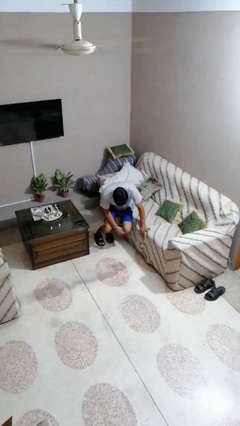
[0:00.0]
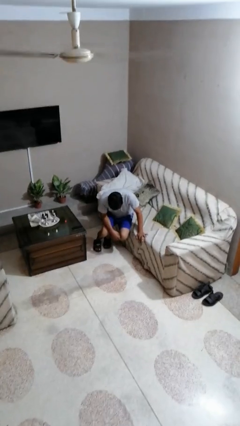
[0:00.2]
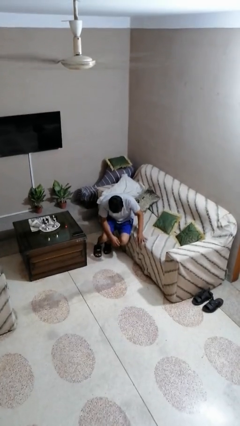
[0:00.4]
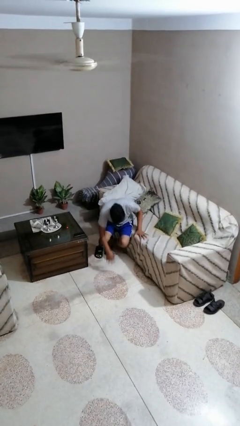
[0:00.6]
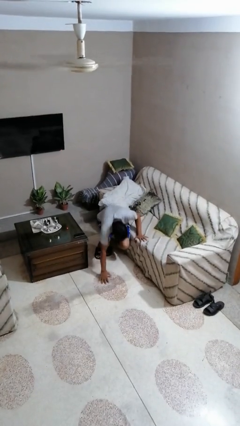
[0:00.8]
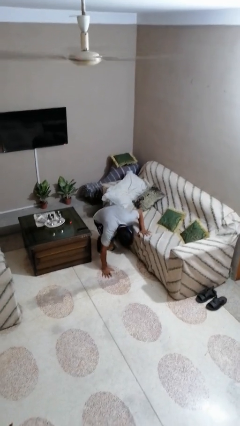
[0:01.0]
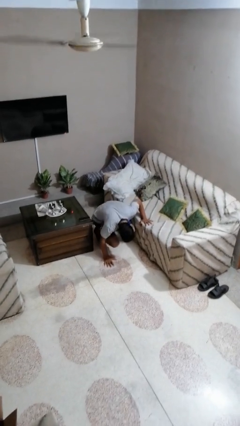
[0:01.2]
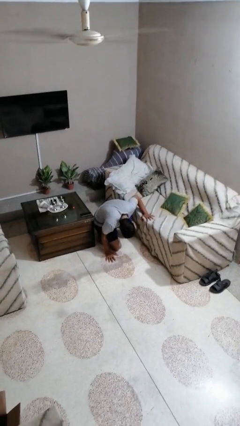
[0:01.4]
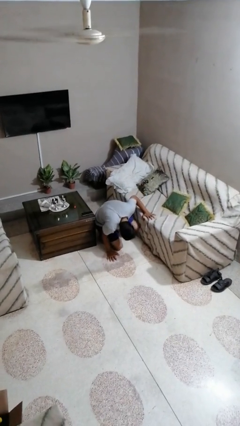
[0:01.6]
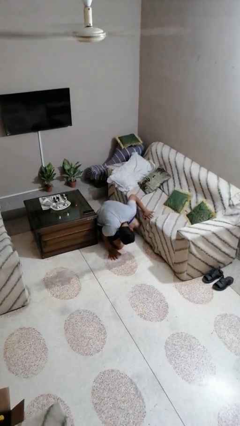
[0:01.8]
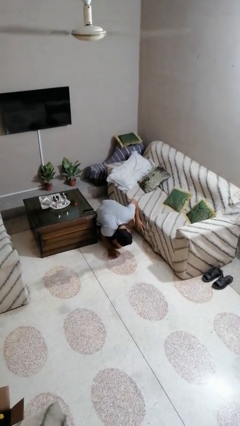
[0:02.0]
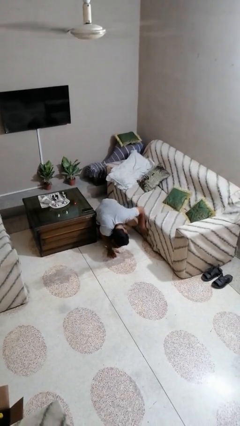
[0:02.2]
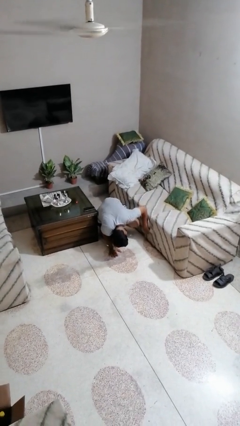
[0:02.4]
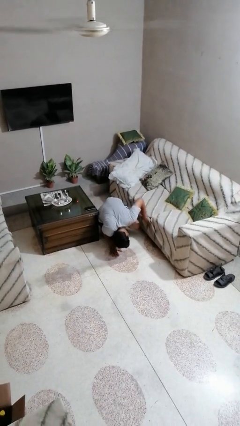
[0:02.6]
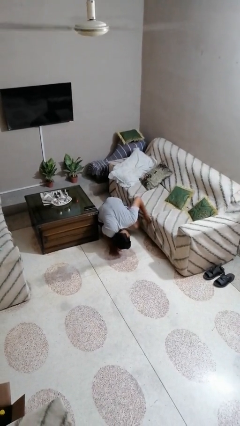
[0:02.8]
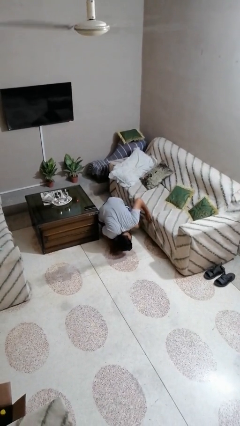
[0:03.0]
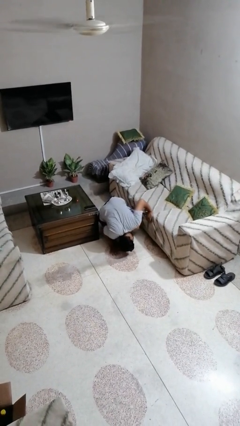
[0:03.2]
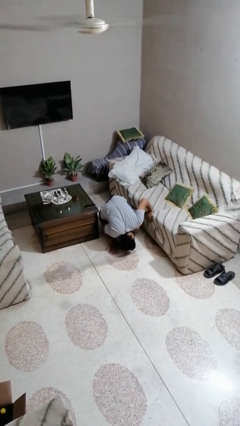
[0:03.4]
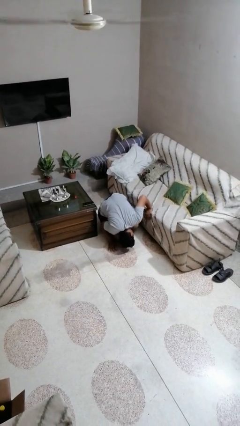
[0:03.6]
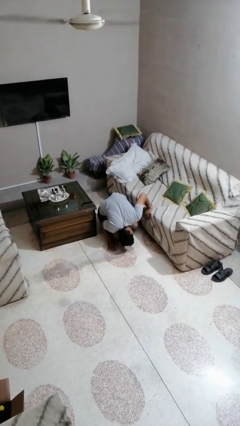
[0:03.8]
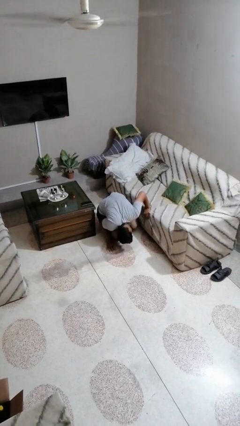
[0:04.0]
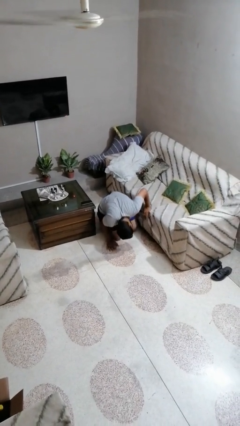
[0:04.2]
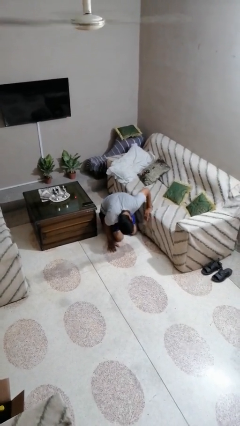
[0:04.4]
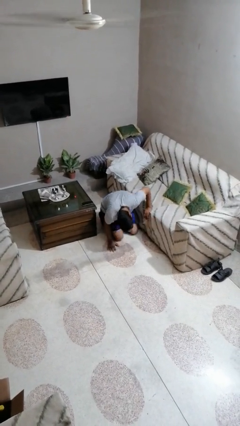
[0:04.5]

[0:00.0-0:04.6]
person searches under couch

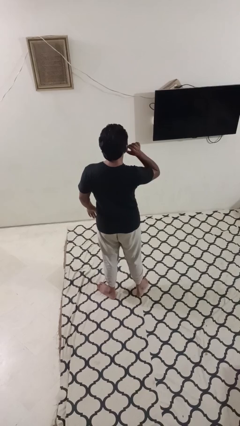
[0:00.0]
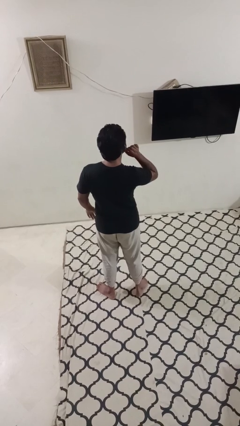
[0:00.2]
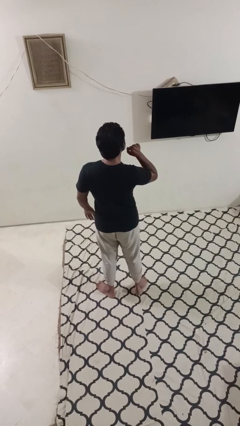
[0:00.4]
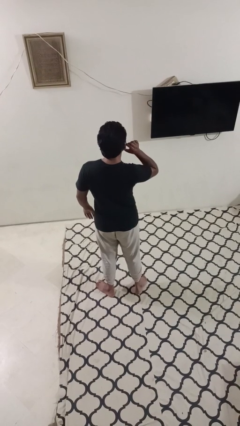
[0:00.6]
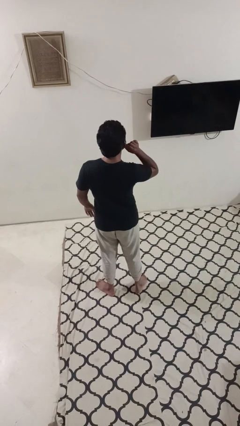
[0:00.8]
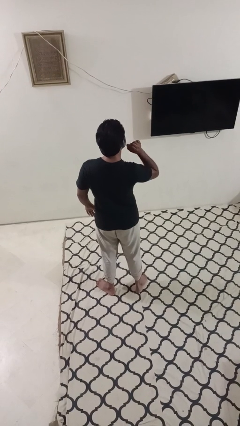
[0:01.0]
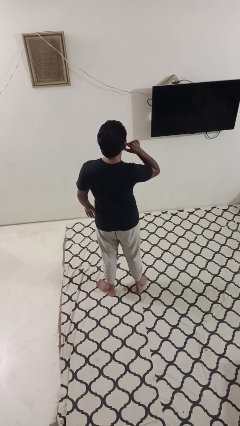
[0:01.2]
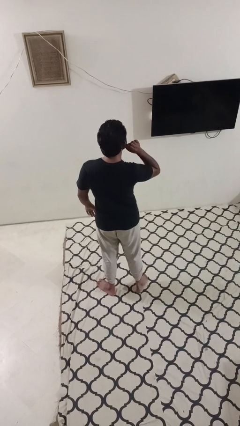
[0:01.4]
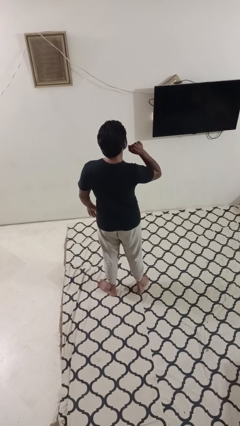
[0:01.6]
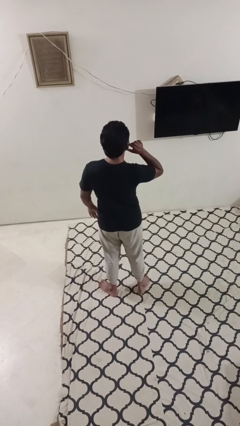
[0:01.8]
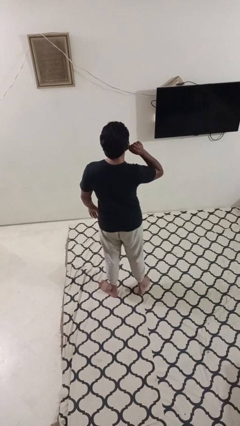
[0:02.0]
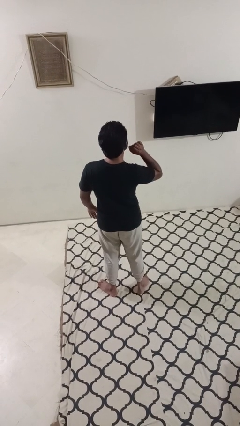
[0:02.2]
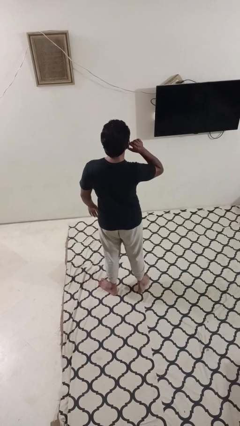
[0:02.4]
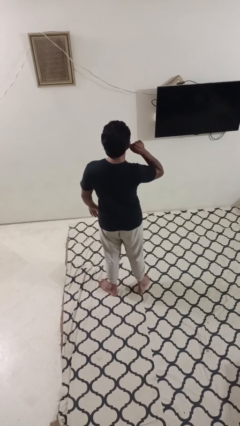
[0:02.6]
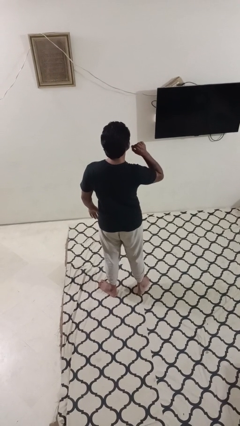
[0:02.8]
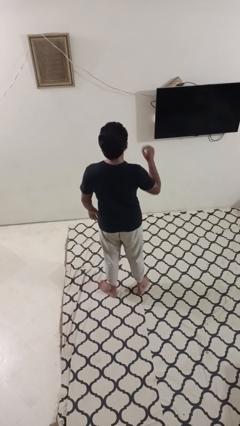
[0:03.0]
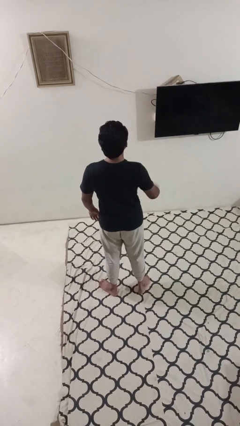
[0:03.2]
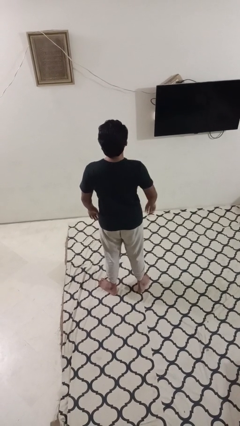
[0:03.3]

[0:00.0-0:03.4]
person touches earlobe

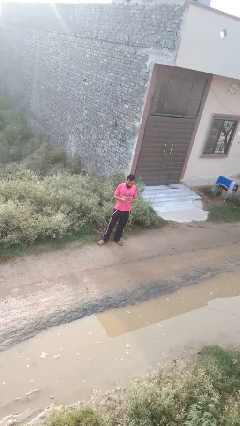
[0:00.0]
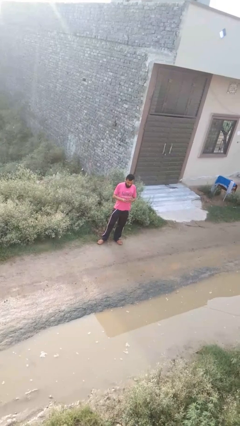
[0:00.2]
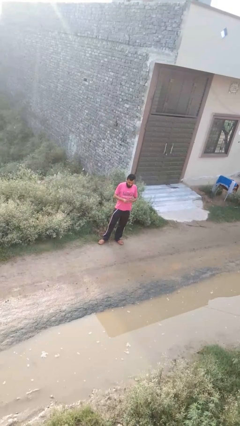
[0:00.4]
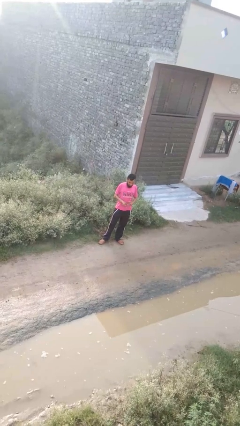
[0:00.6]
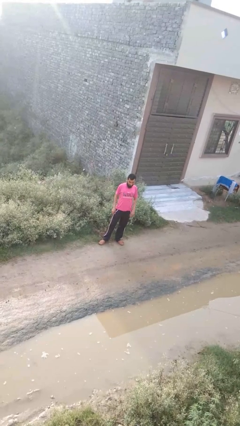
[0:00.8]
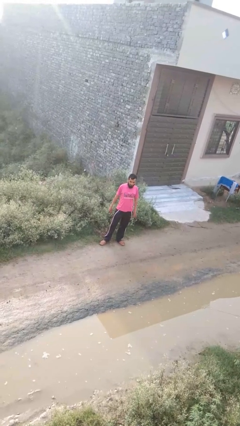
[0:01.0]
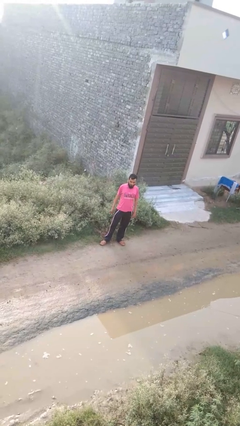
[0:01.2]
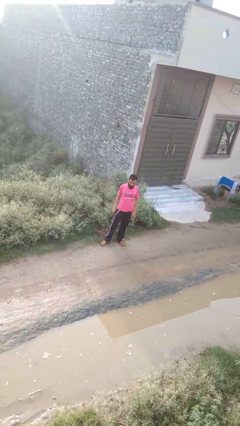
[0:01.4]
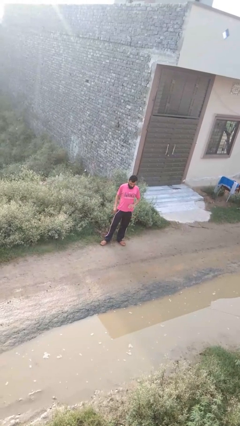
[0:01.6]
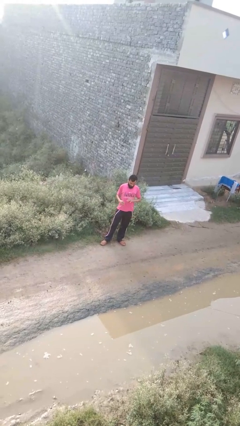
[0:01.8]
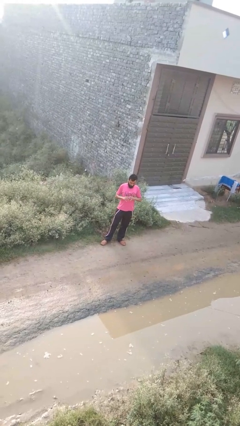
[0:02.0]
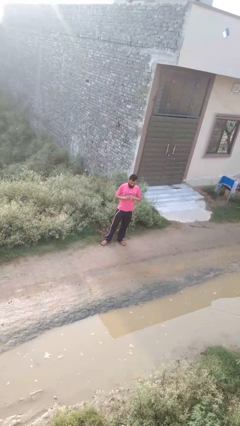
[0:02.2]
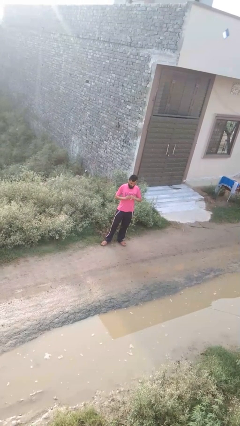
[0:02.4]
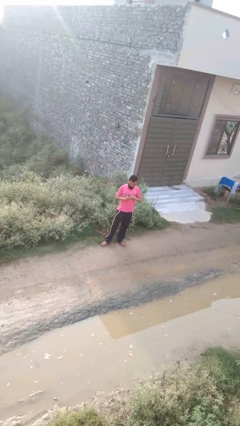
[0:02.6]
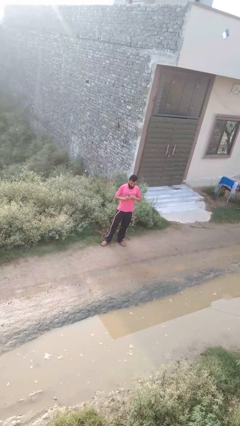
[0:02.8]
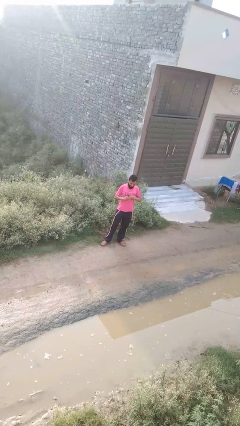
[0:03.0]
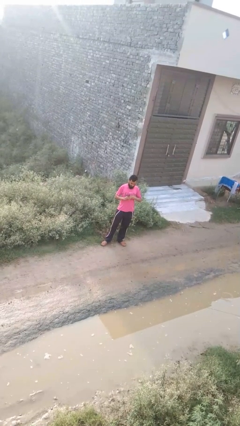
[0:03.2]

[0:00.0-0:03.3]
person takes off ring

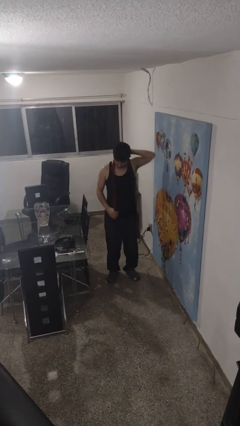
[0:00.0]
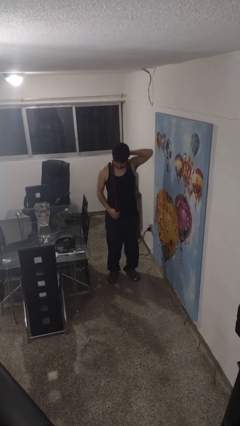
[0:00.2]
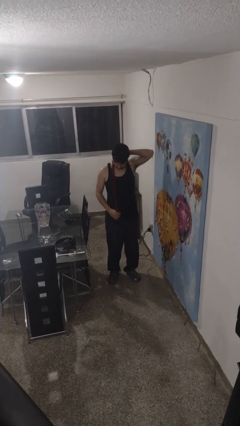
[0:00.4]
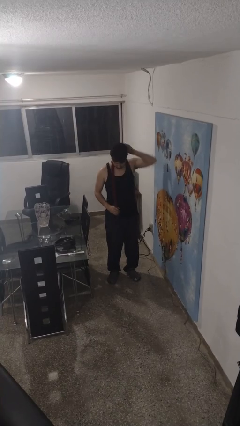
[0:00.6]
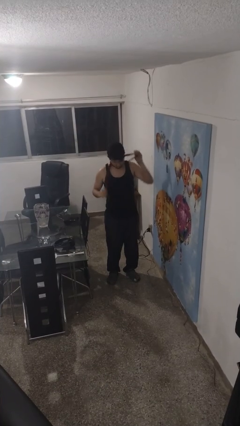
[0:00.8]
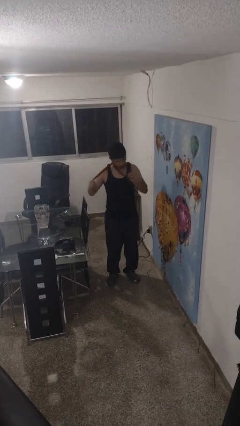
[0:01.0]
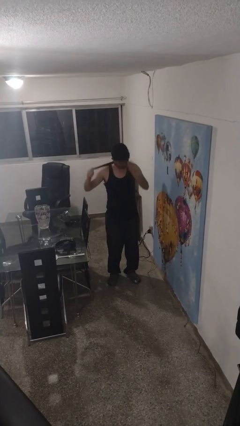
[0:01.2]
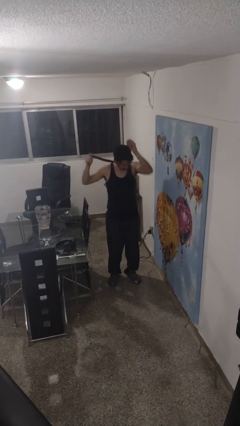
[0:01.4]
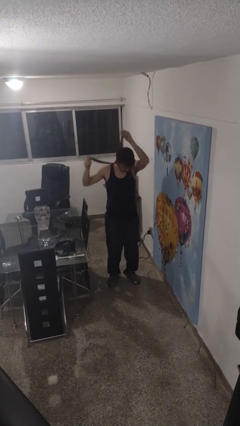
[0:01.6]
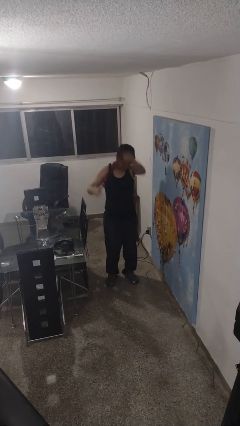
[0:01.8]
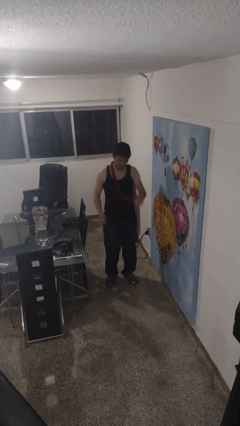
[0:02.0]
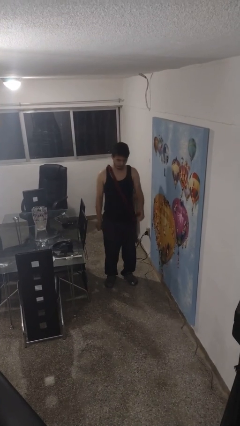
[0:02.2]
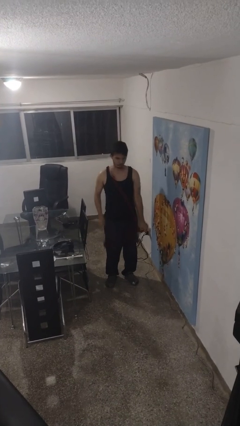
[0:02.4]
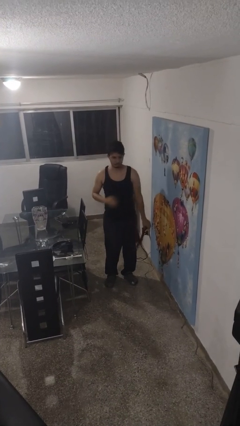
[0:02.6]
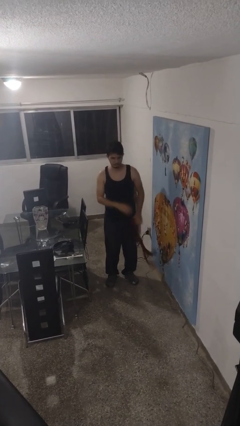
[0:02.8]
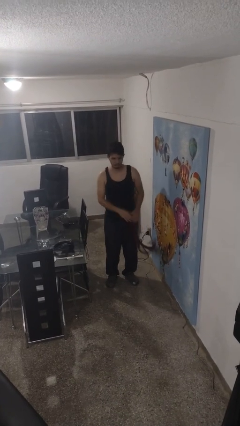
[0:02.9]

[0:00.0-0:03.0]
person takes off scarf

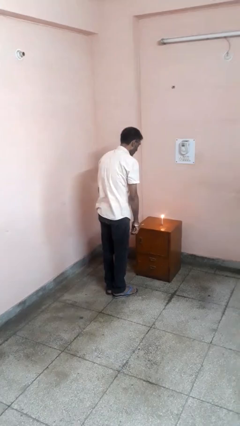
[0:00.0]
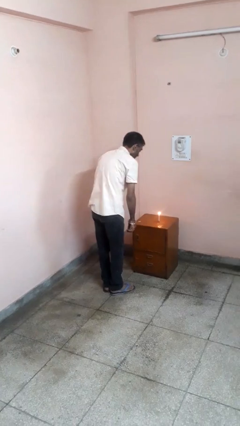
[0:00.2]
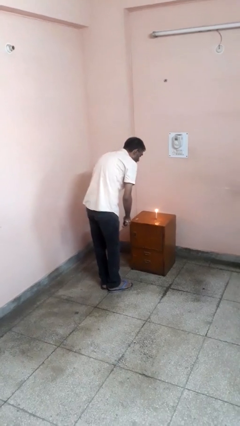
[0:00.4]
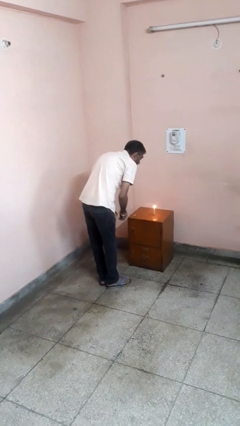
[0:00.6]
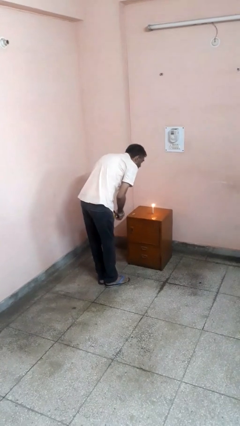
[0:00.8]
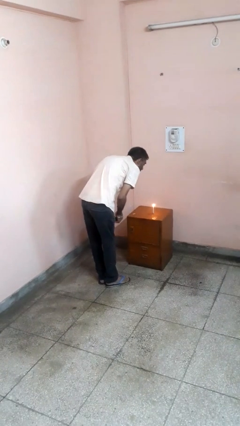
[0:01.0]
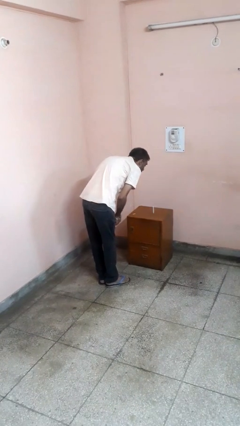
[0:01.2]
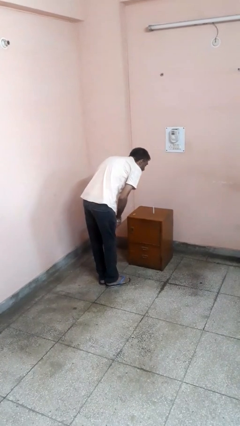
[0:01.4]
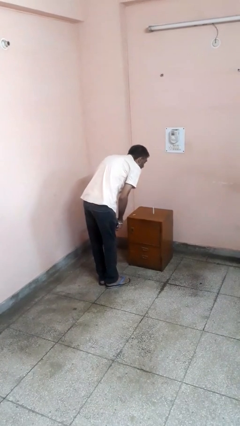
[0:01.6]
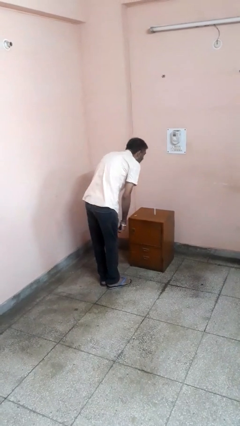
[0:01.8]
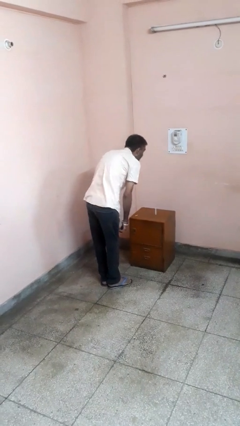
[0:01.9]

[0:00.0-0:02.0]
person extinguishes candle

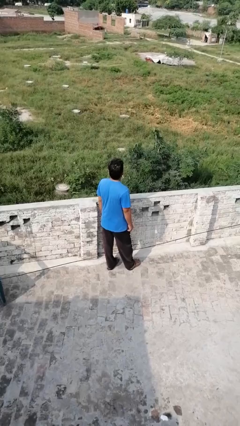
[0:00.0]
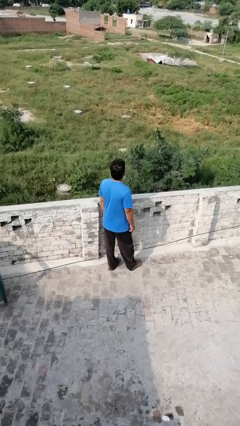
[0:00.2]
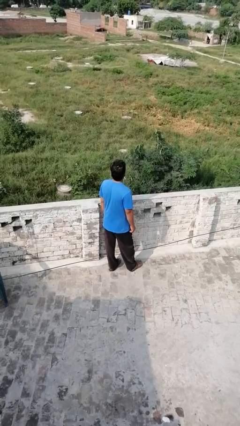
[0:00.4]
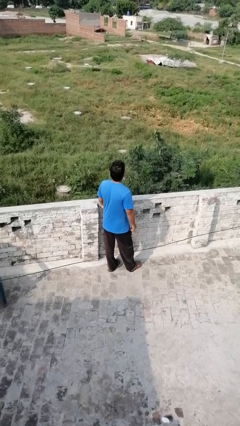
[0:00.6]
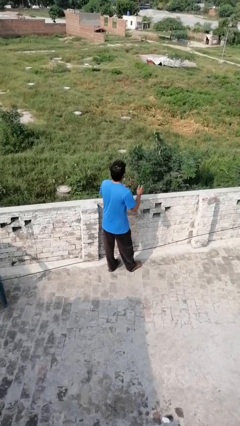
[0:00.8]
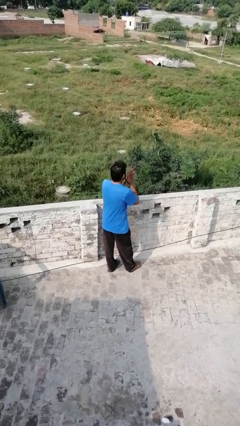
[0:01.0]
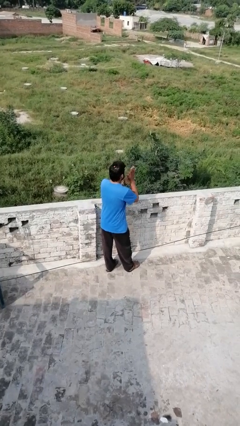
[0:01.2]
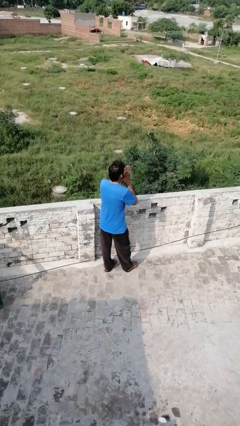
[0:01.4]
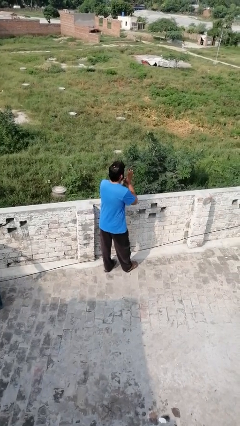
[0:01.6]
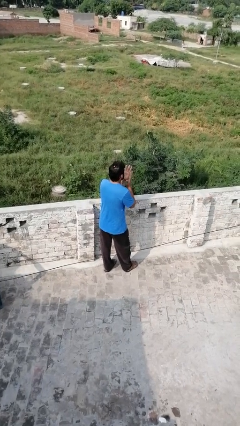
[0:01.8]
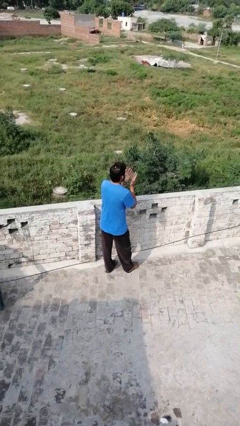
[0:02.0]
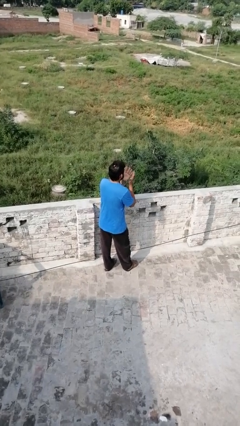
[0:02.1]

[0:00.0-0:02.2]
person blows into hands
